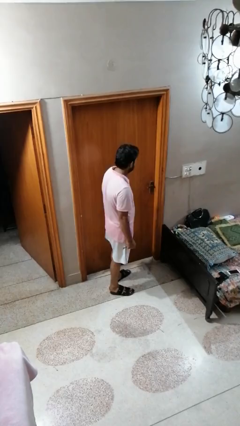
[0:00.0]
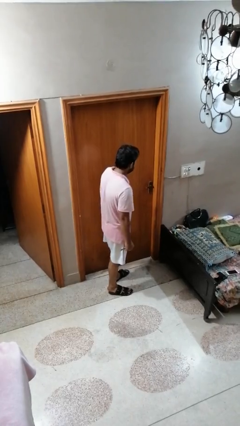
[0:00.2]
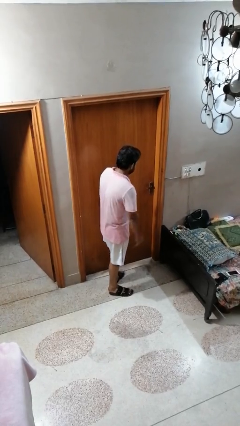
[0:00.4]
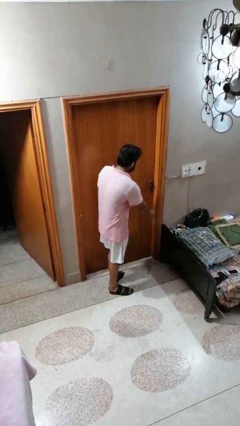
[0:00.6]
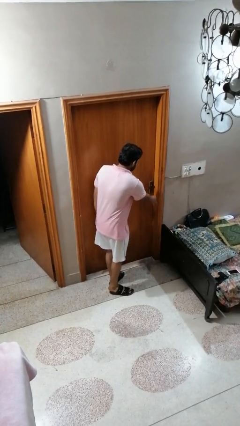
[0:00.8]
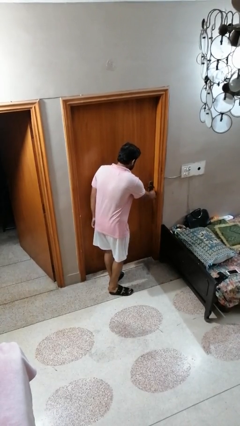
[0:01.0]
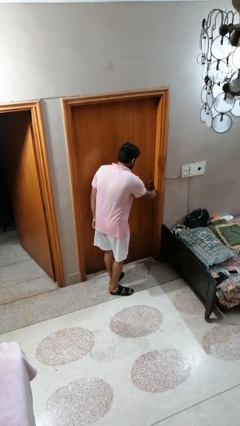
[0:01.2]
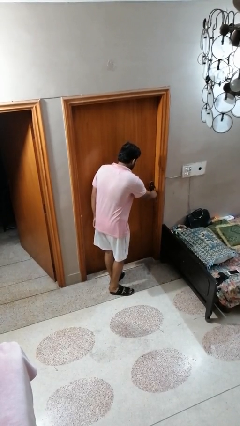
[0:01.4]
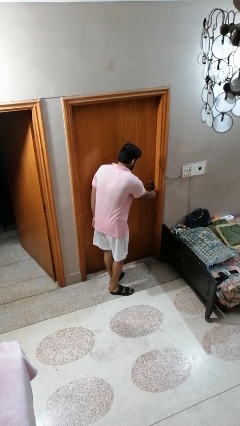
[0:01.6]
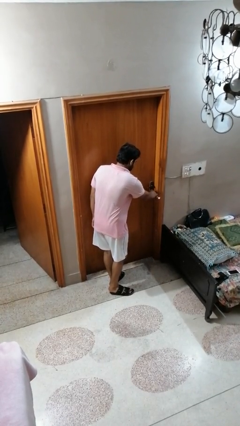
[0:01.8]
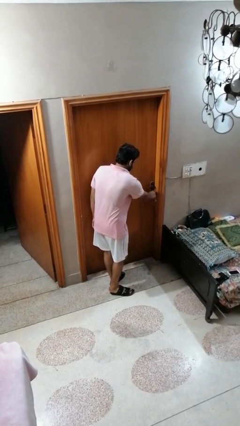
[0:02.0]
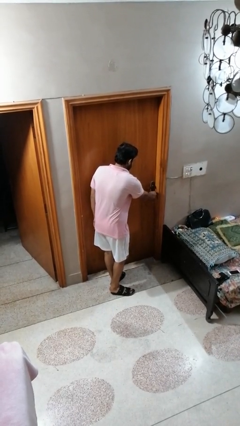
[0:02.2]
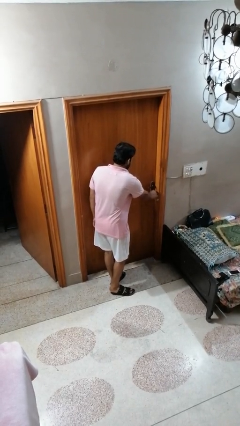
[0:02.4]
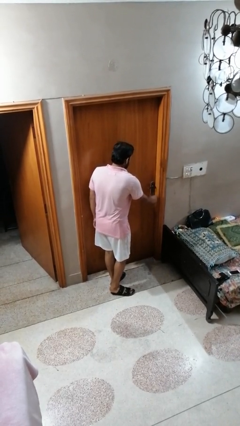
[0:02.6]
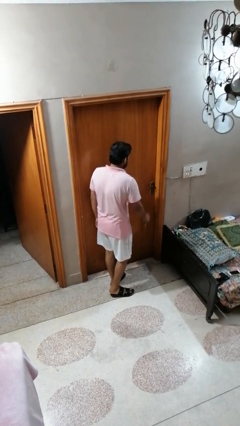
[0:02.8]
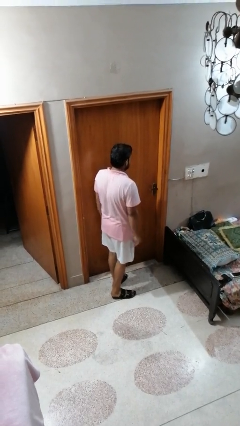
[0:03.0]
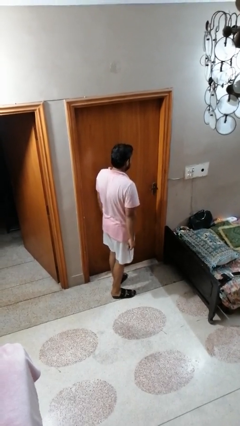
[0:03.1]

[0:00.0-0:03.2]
person locks door with keys

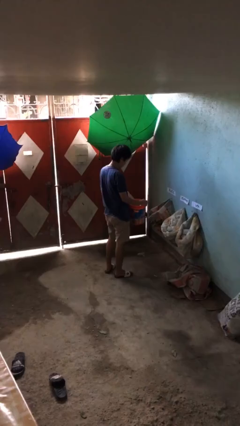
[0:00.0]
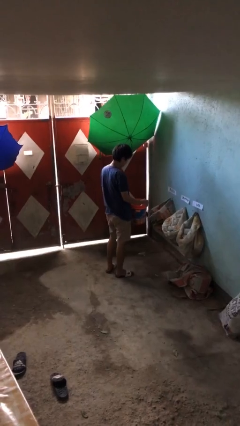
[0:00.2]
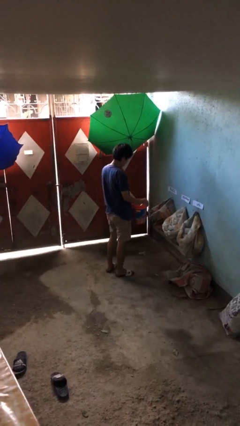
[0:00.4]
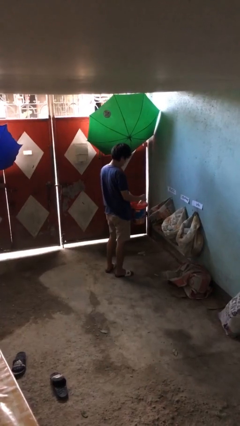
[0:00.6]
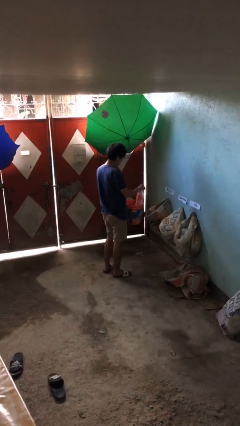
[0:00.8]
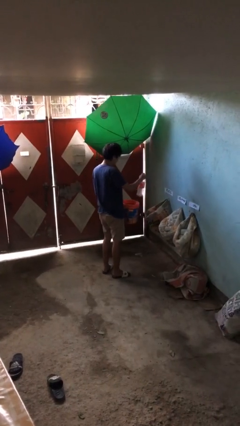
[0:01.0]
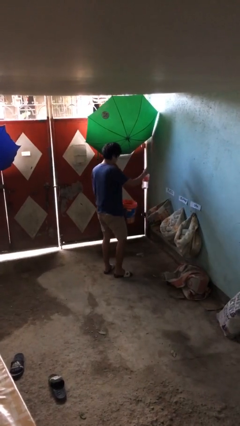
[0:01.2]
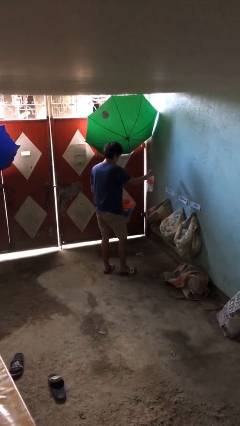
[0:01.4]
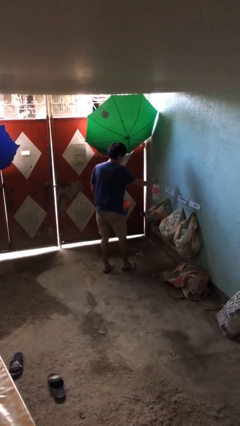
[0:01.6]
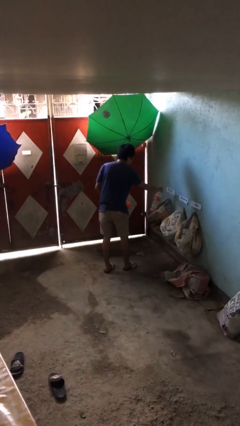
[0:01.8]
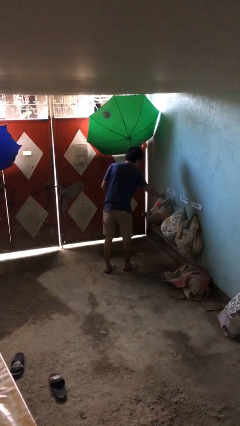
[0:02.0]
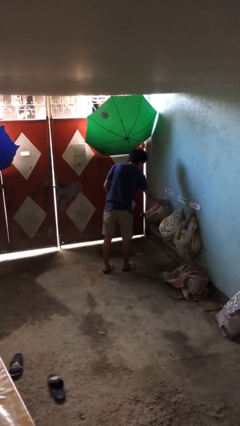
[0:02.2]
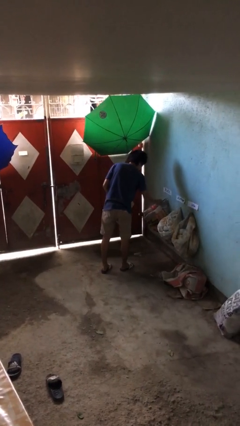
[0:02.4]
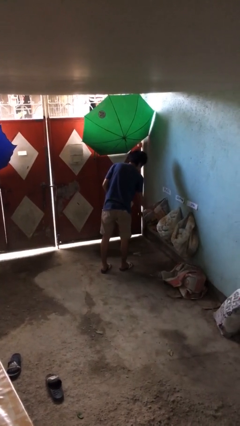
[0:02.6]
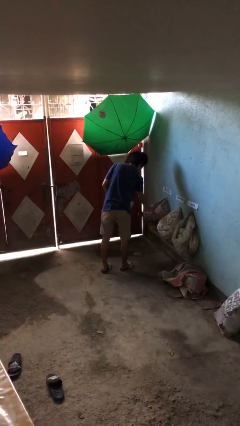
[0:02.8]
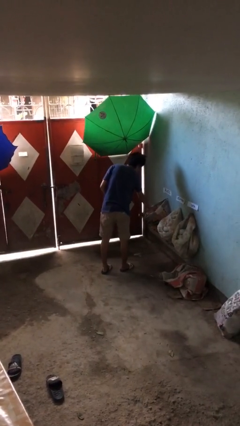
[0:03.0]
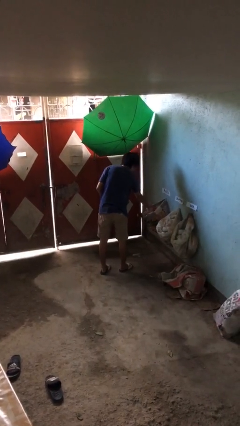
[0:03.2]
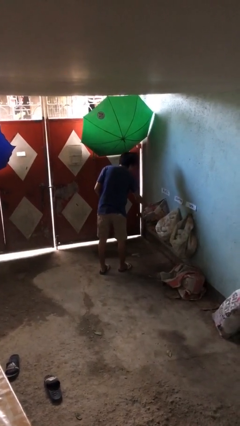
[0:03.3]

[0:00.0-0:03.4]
person discards trash

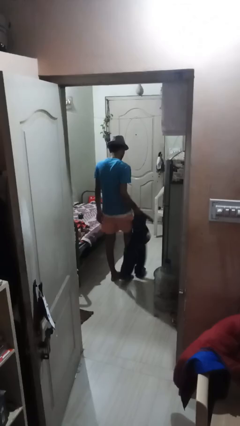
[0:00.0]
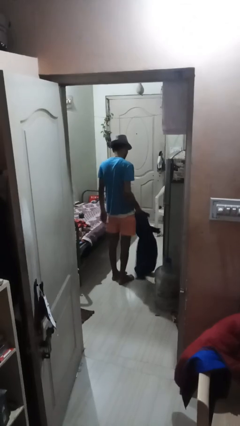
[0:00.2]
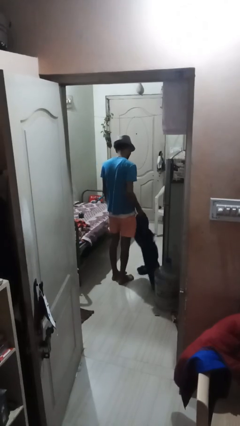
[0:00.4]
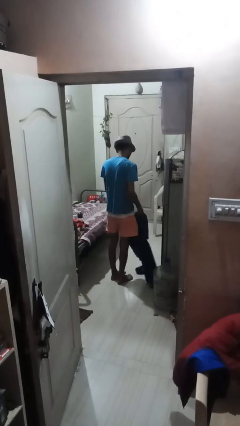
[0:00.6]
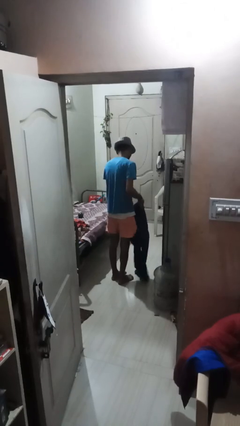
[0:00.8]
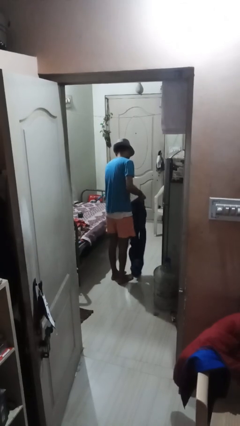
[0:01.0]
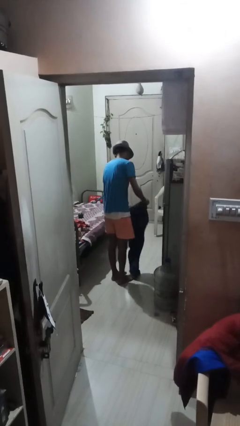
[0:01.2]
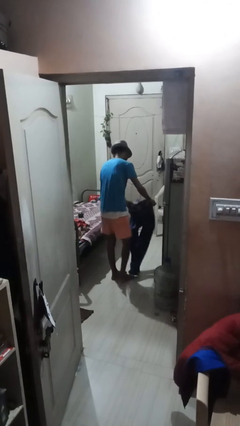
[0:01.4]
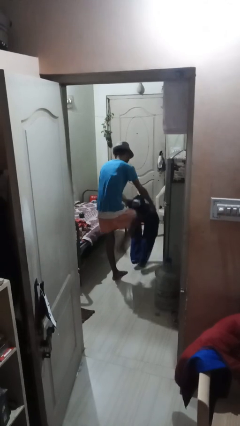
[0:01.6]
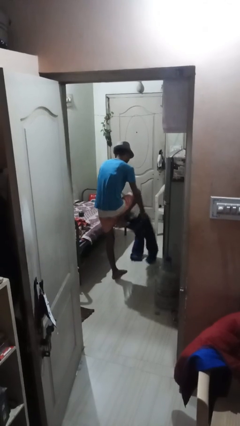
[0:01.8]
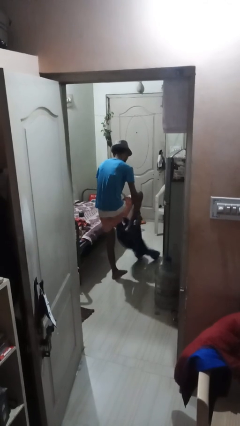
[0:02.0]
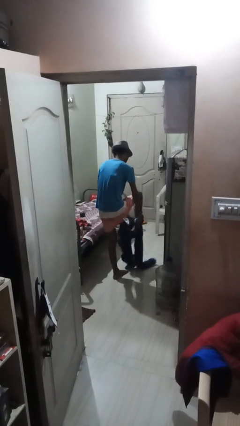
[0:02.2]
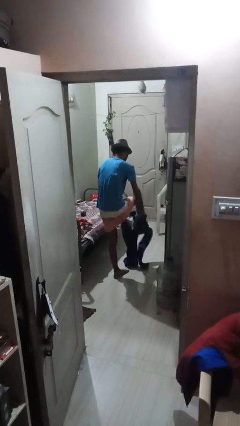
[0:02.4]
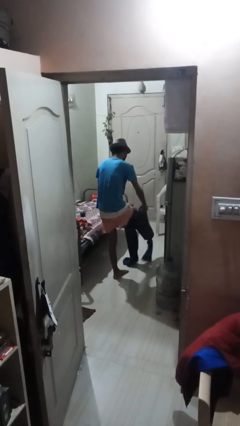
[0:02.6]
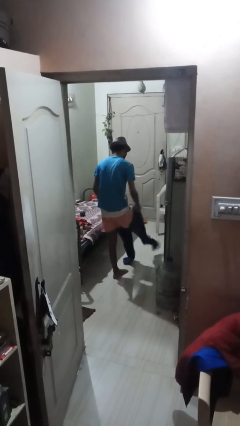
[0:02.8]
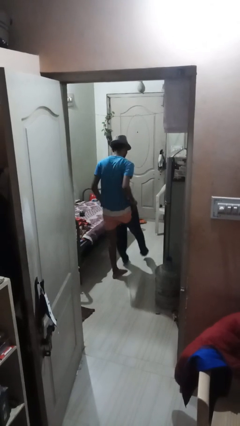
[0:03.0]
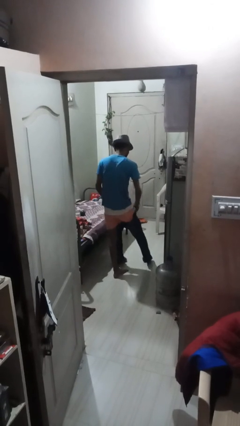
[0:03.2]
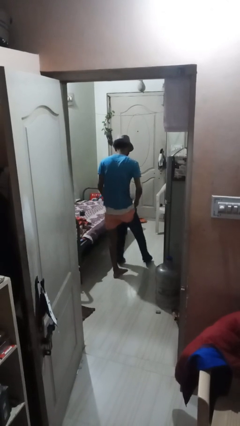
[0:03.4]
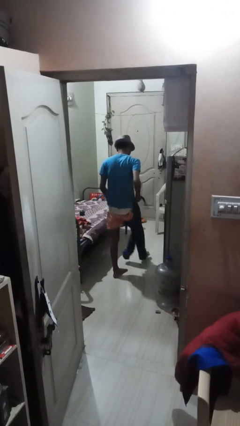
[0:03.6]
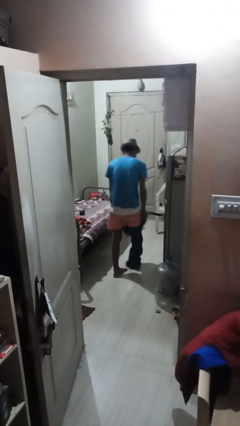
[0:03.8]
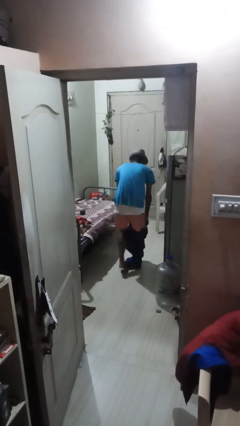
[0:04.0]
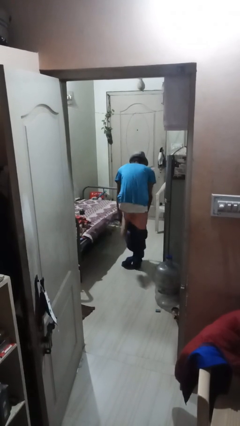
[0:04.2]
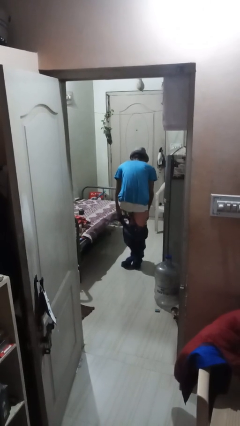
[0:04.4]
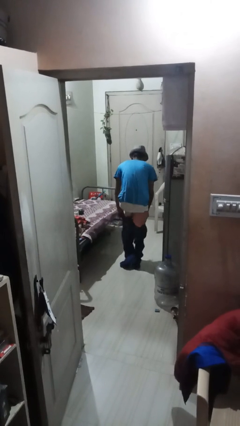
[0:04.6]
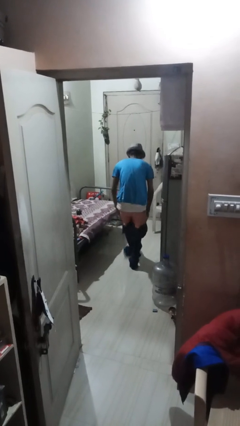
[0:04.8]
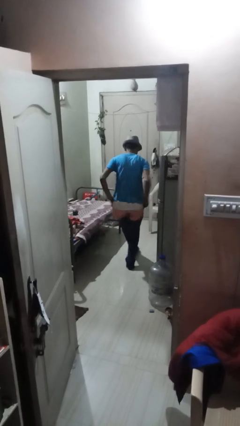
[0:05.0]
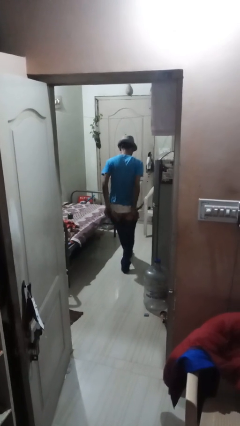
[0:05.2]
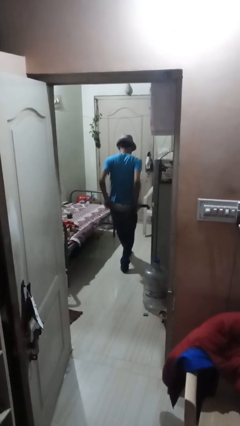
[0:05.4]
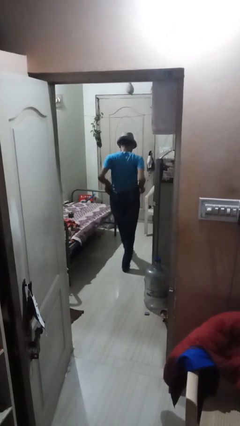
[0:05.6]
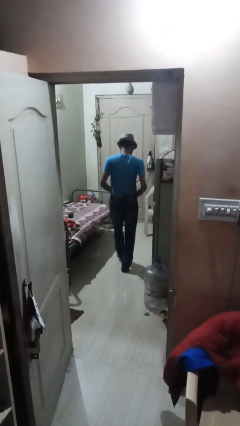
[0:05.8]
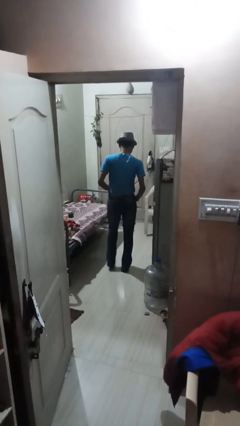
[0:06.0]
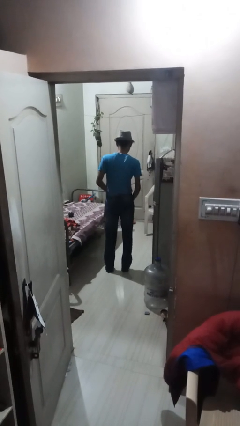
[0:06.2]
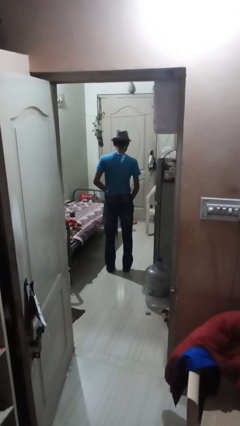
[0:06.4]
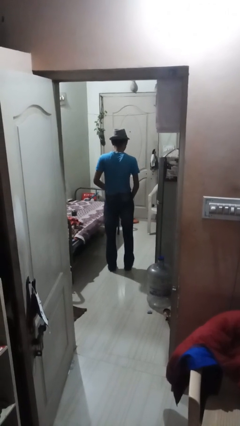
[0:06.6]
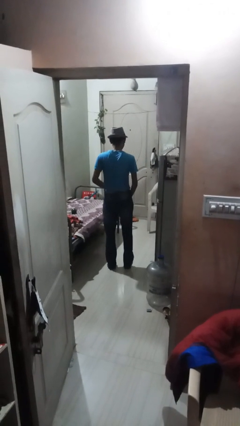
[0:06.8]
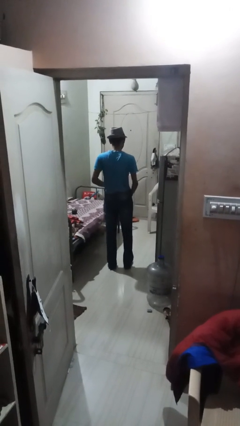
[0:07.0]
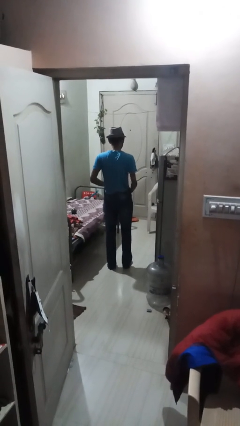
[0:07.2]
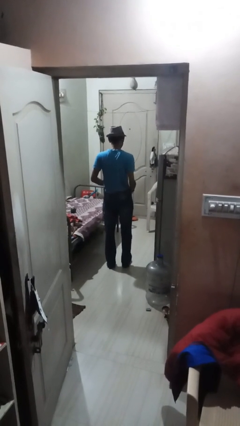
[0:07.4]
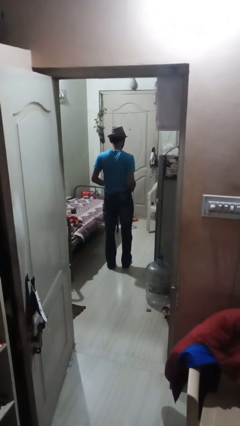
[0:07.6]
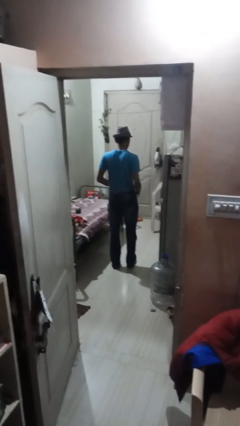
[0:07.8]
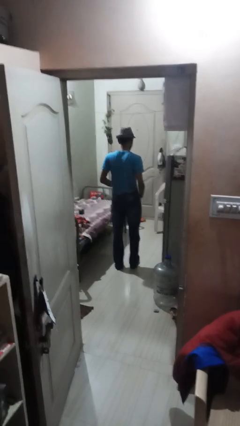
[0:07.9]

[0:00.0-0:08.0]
person puts on pants

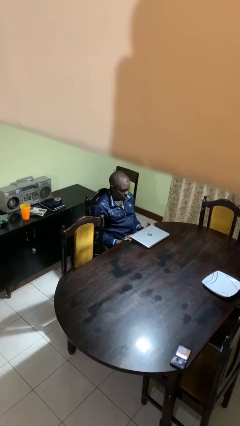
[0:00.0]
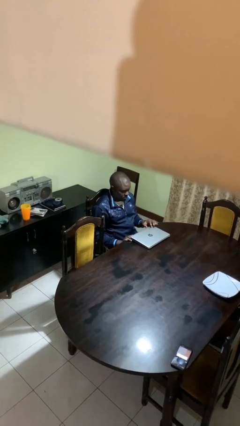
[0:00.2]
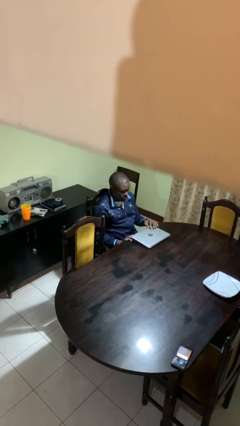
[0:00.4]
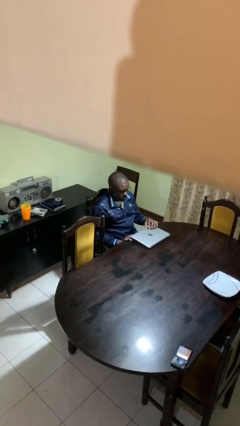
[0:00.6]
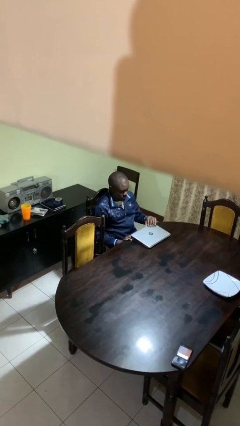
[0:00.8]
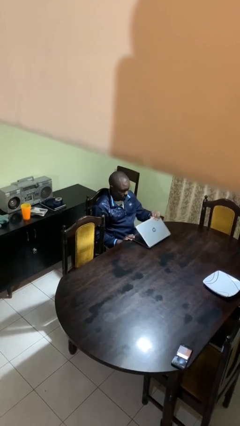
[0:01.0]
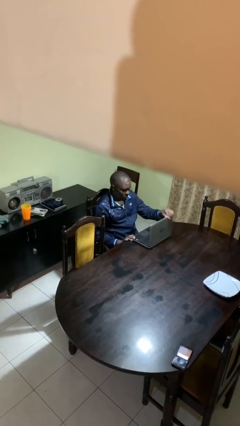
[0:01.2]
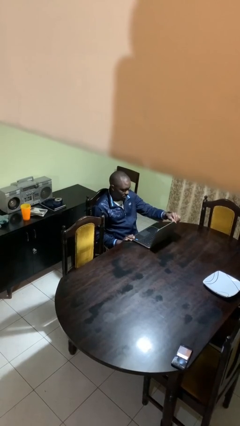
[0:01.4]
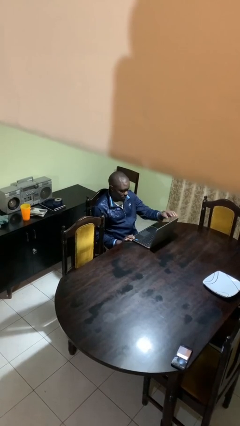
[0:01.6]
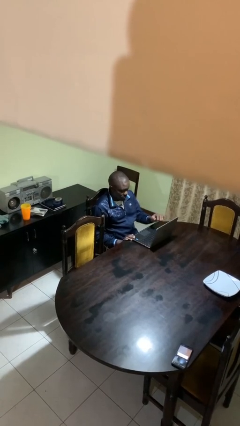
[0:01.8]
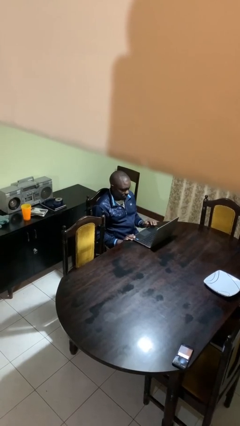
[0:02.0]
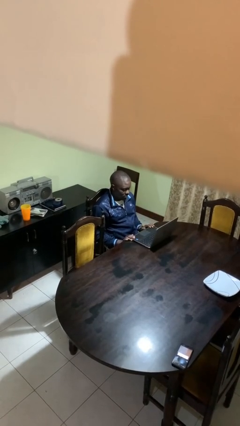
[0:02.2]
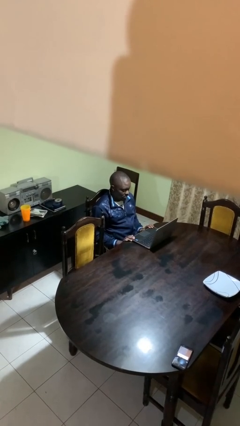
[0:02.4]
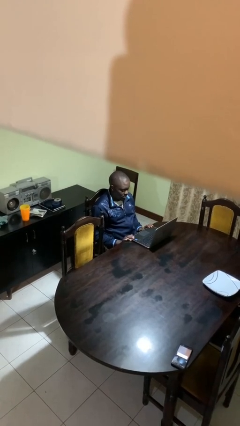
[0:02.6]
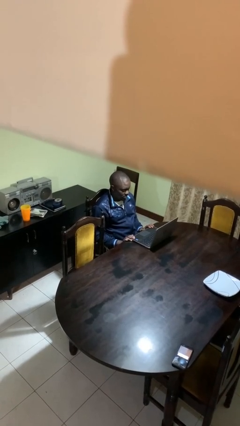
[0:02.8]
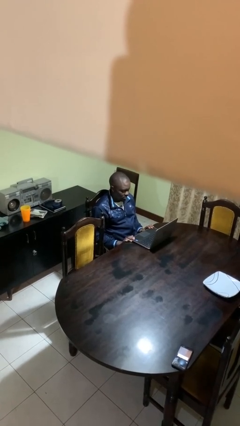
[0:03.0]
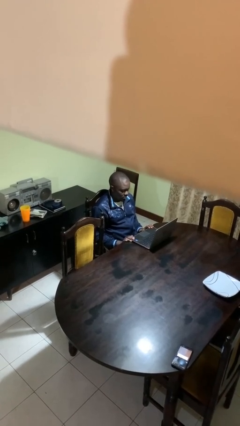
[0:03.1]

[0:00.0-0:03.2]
person opens laptop
